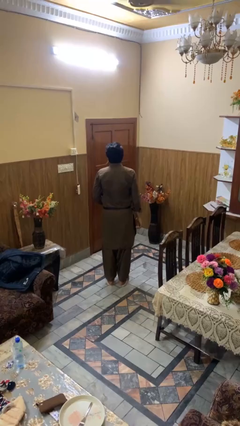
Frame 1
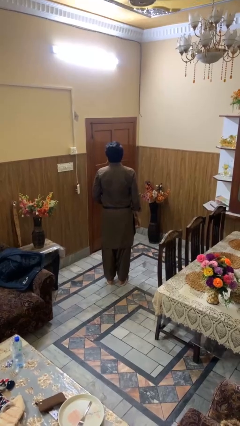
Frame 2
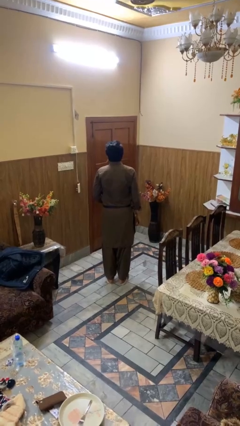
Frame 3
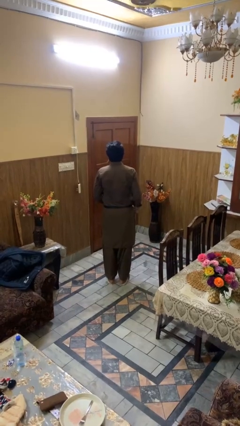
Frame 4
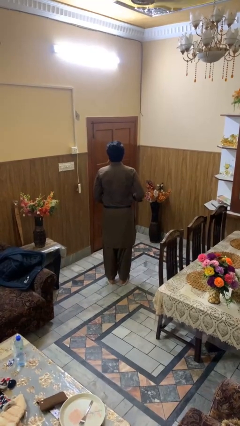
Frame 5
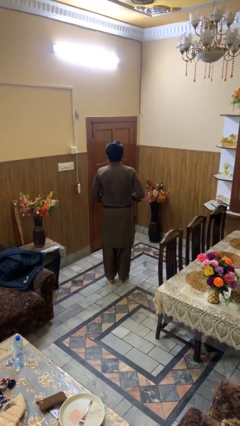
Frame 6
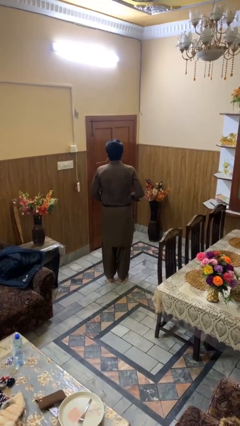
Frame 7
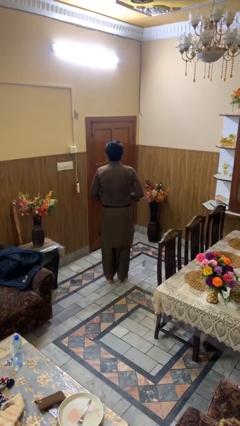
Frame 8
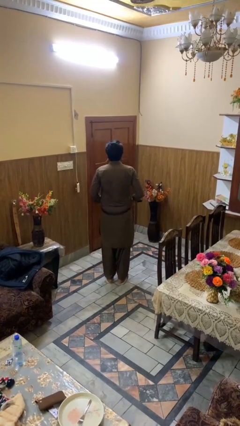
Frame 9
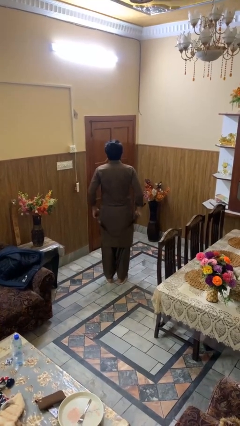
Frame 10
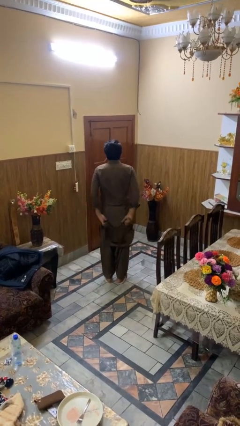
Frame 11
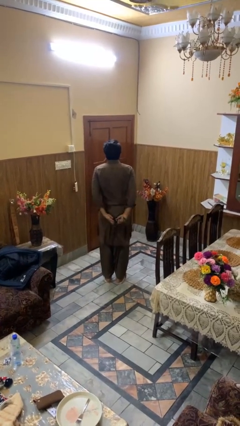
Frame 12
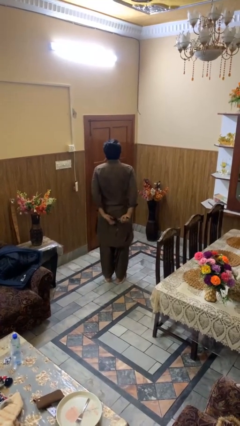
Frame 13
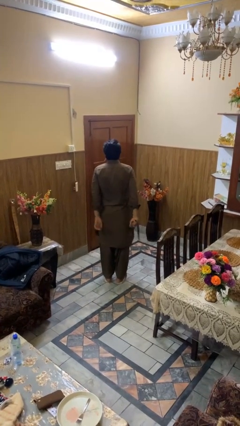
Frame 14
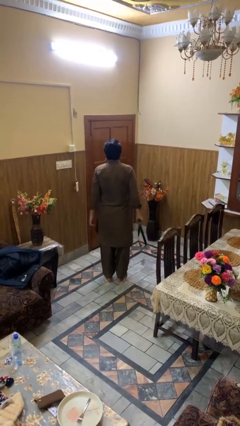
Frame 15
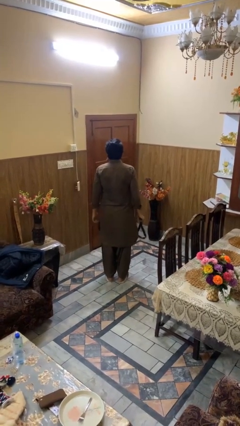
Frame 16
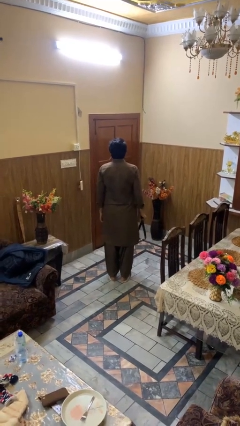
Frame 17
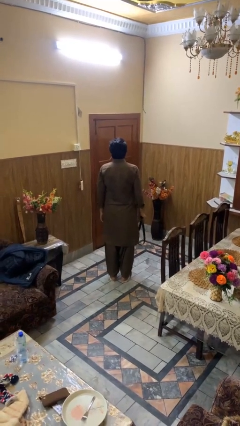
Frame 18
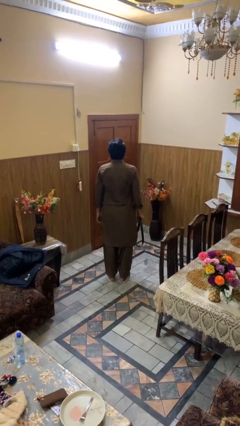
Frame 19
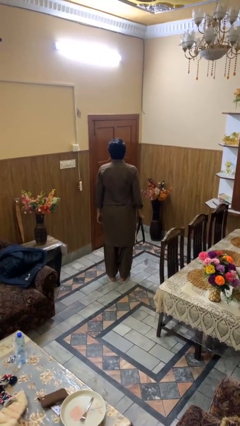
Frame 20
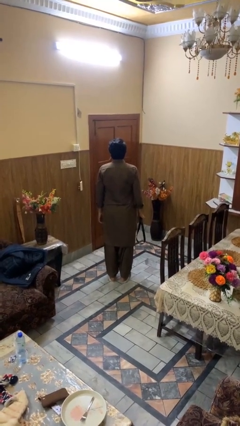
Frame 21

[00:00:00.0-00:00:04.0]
person takes off belt

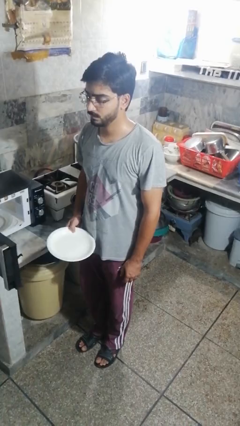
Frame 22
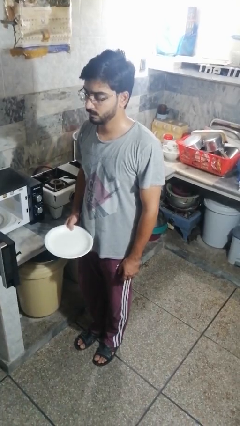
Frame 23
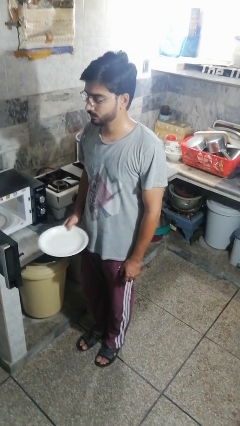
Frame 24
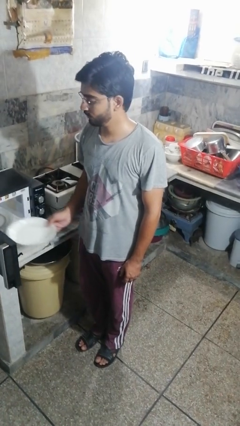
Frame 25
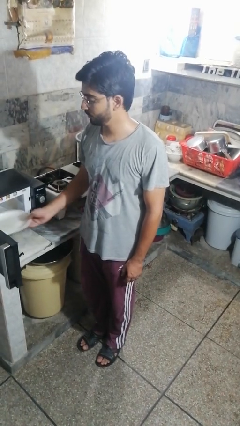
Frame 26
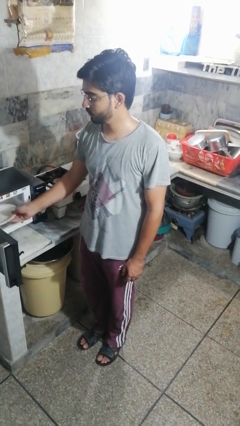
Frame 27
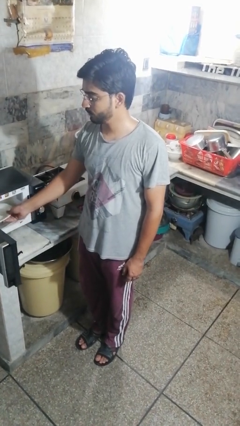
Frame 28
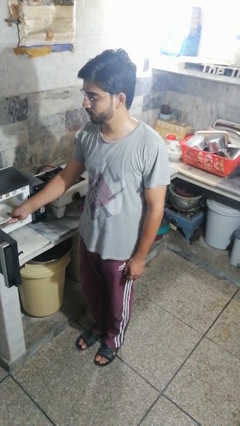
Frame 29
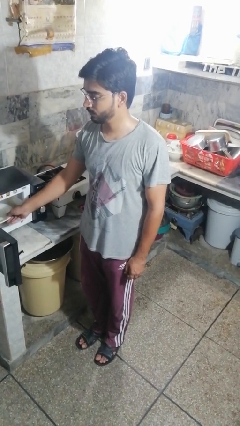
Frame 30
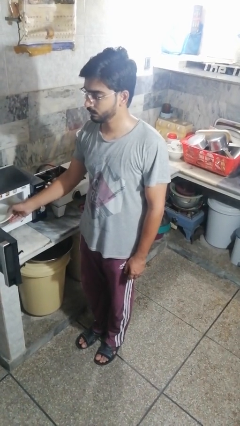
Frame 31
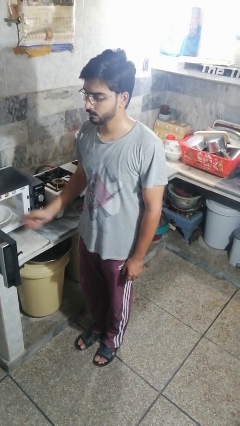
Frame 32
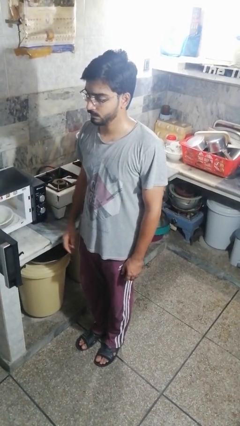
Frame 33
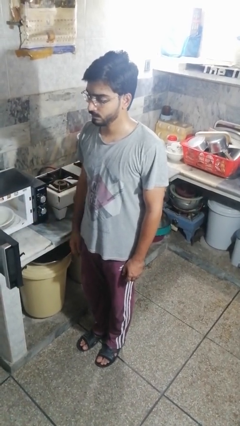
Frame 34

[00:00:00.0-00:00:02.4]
person puts object into oven

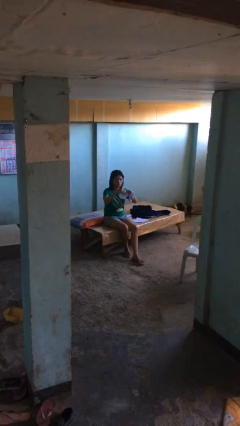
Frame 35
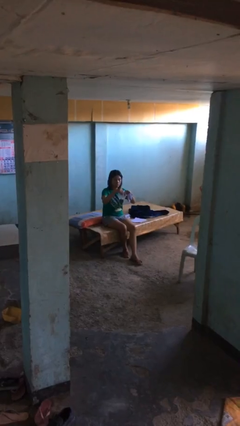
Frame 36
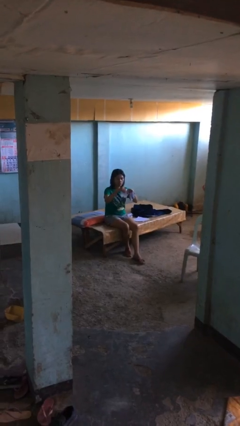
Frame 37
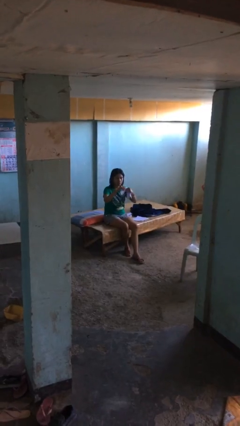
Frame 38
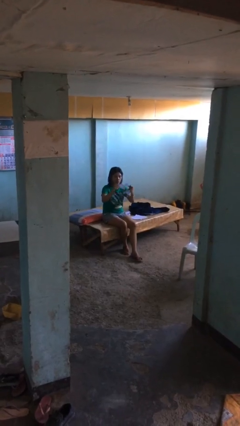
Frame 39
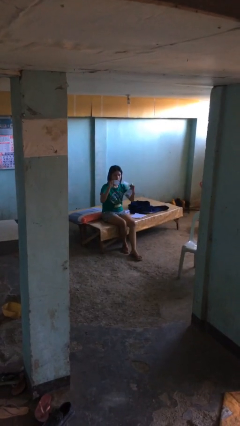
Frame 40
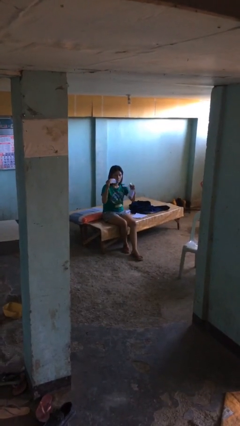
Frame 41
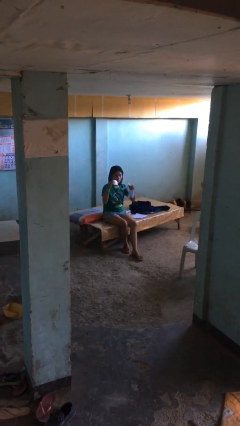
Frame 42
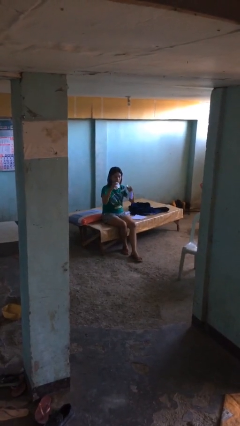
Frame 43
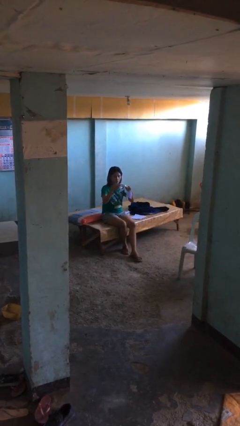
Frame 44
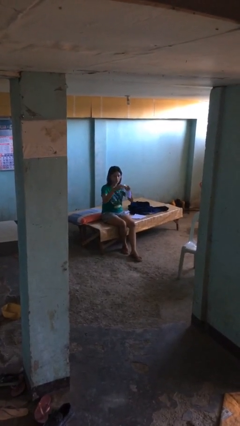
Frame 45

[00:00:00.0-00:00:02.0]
person tears paper

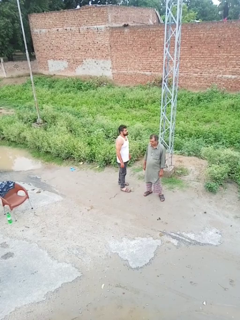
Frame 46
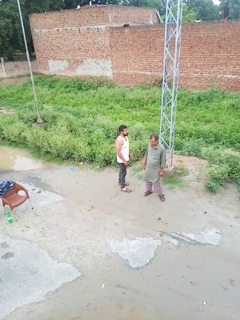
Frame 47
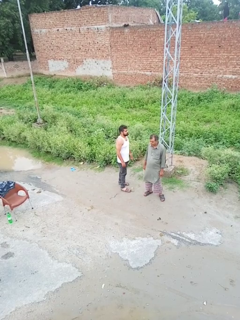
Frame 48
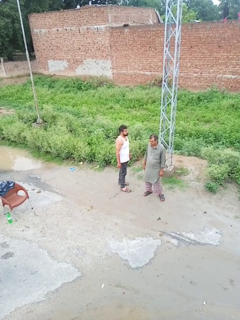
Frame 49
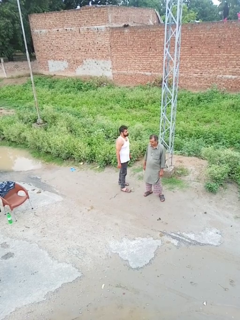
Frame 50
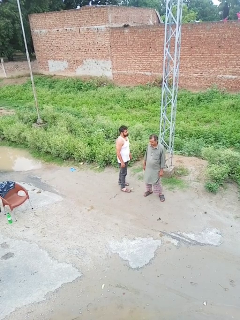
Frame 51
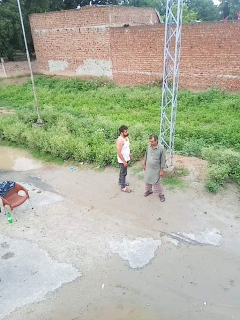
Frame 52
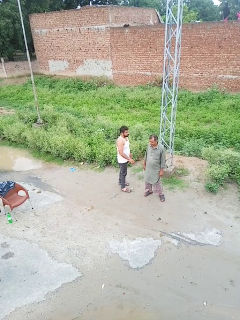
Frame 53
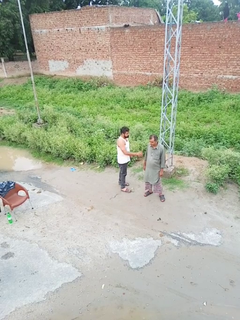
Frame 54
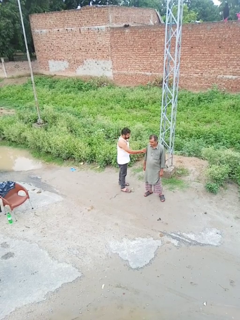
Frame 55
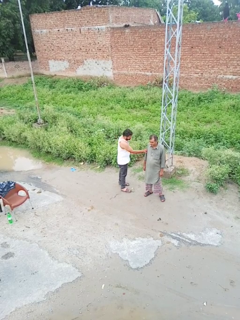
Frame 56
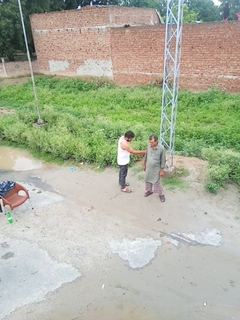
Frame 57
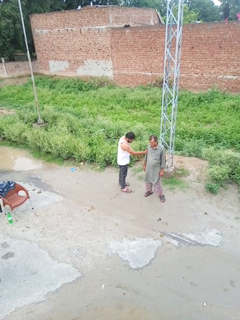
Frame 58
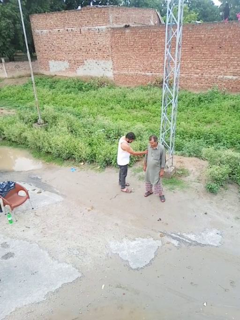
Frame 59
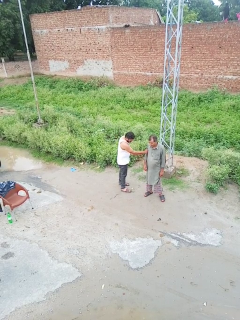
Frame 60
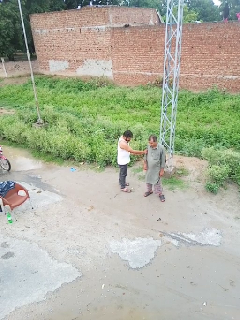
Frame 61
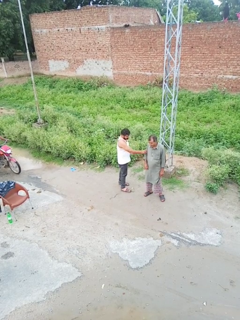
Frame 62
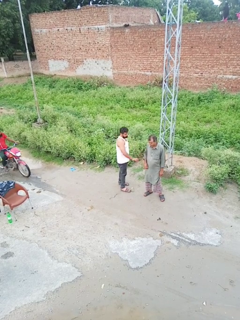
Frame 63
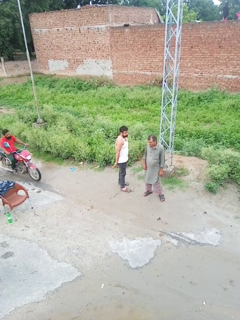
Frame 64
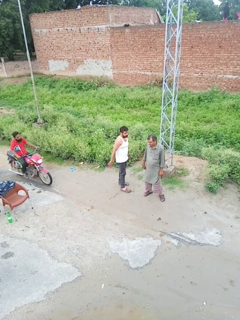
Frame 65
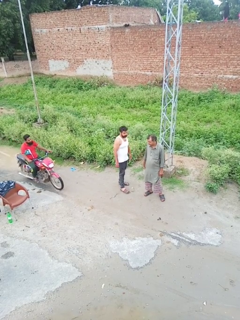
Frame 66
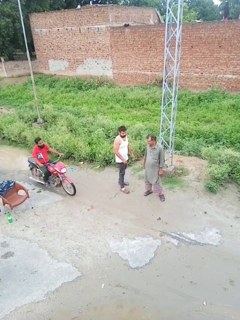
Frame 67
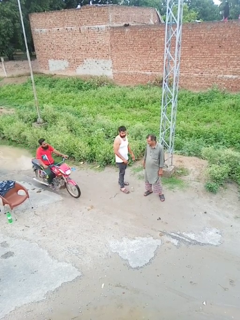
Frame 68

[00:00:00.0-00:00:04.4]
person grabs person by bicep

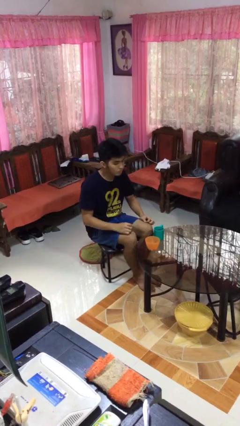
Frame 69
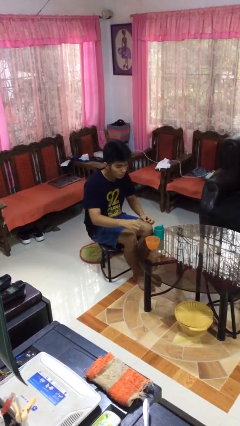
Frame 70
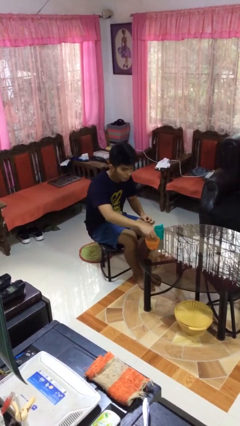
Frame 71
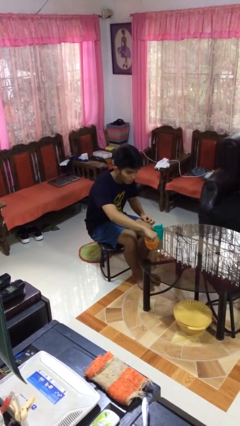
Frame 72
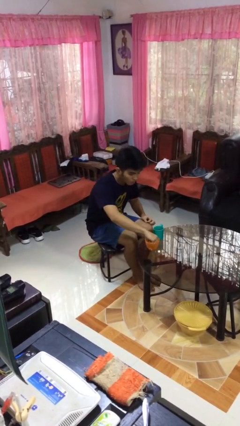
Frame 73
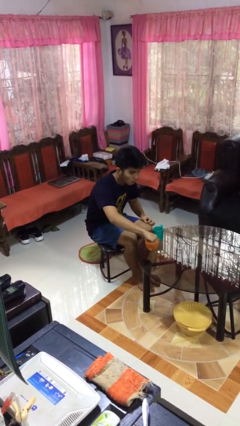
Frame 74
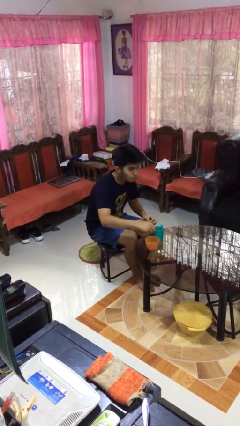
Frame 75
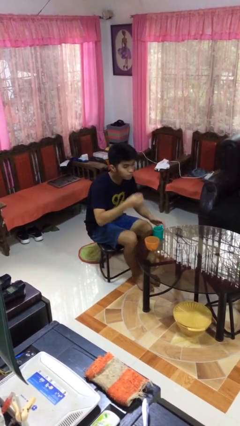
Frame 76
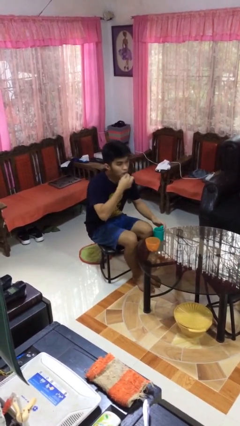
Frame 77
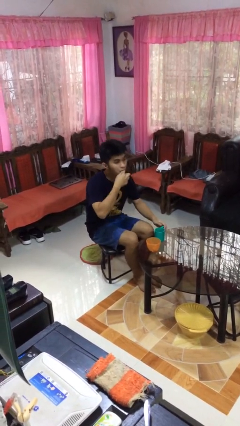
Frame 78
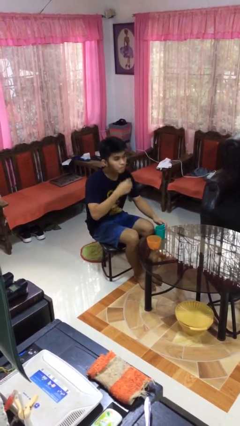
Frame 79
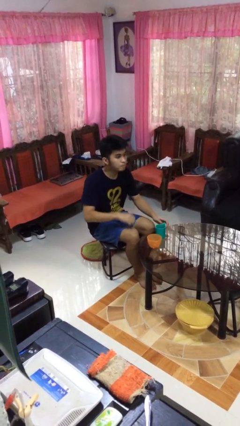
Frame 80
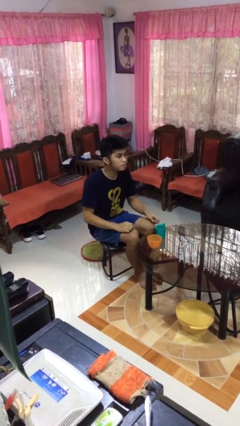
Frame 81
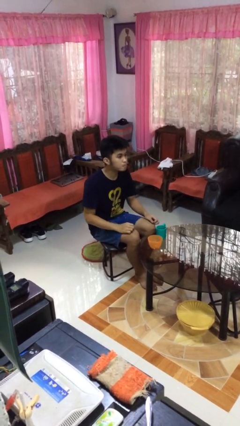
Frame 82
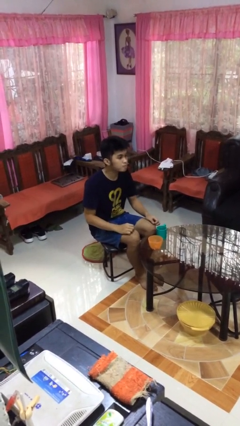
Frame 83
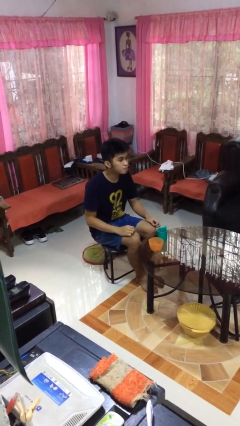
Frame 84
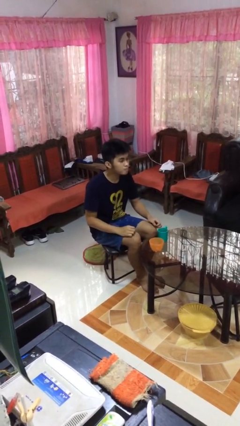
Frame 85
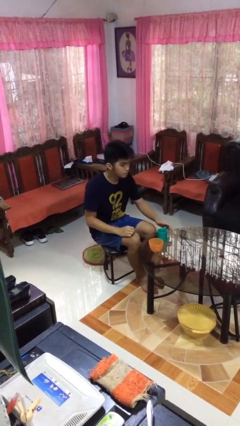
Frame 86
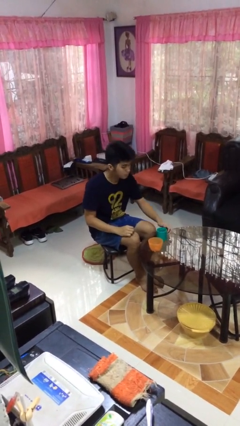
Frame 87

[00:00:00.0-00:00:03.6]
person takes medicine pills

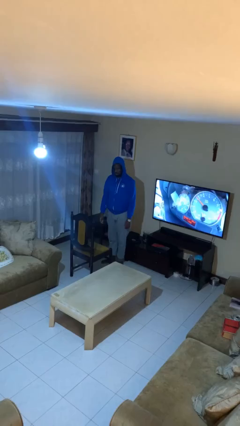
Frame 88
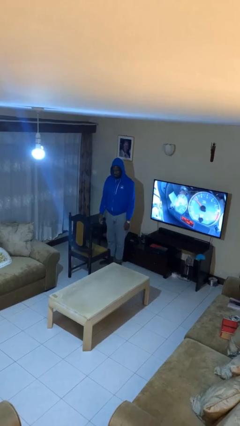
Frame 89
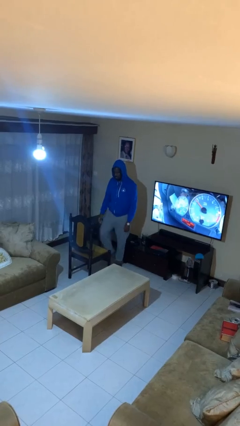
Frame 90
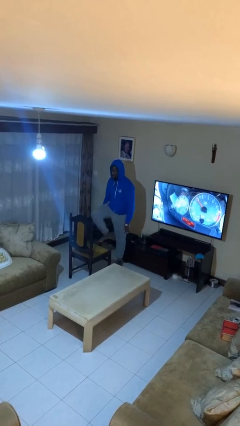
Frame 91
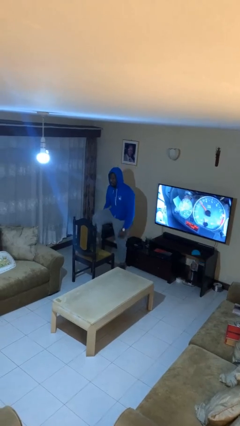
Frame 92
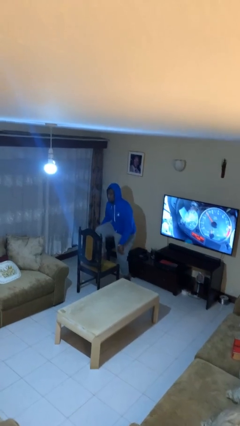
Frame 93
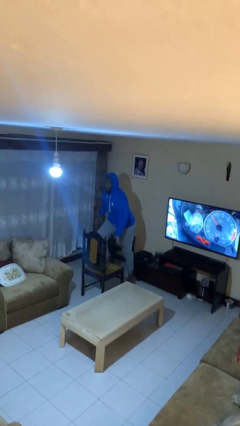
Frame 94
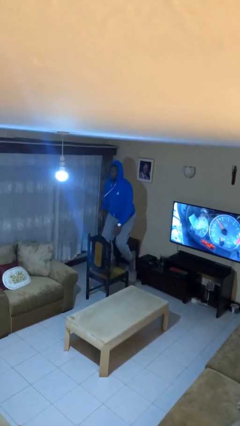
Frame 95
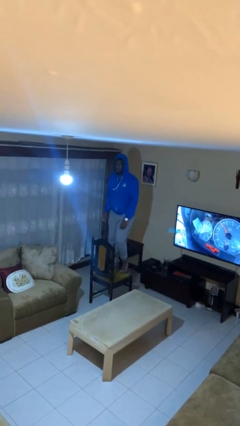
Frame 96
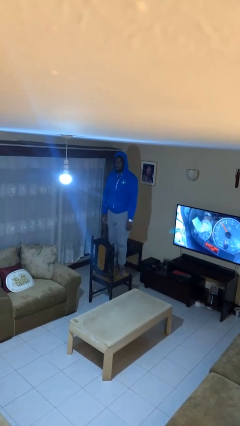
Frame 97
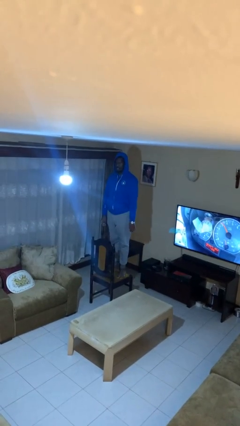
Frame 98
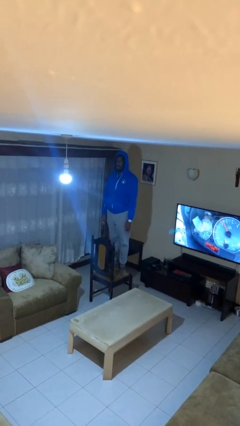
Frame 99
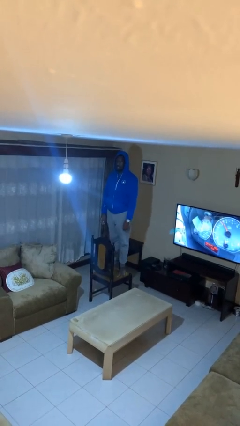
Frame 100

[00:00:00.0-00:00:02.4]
person climbs on chair
